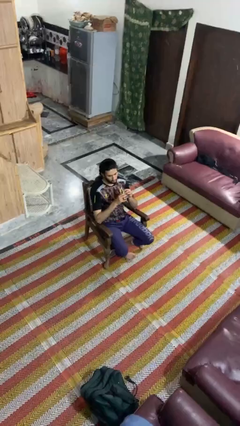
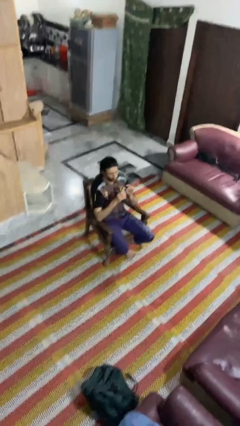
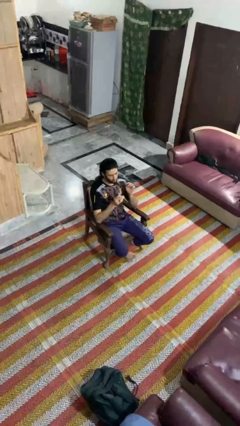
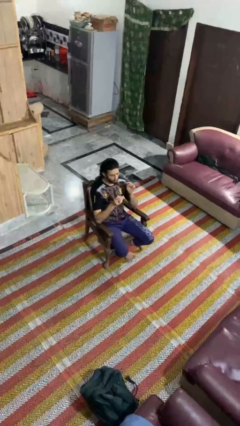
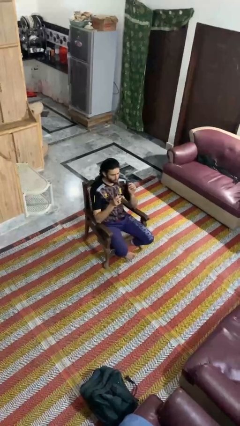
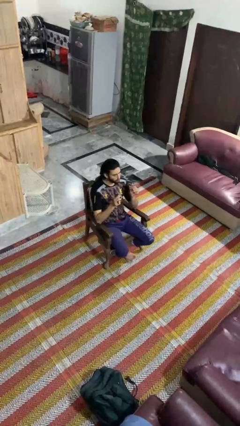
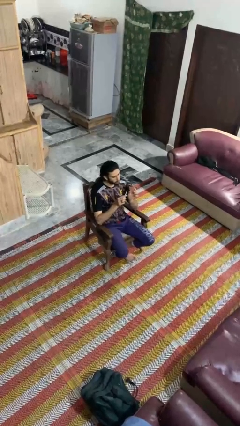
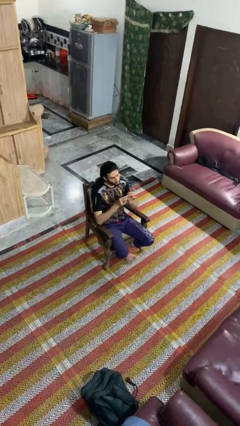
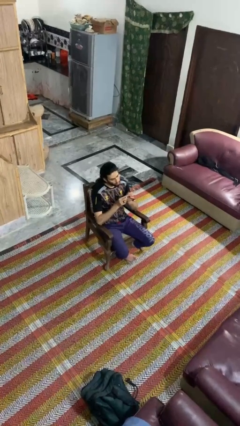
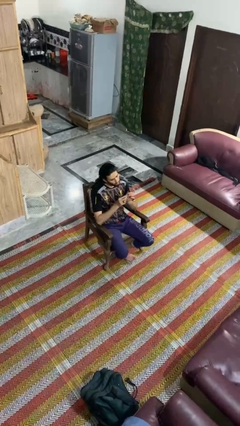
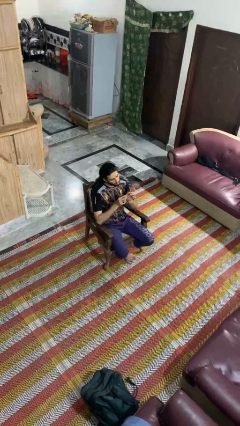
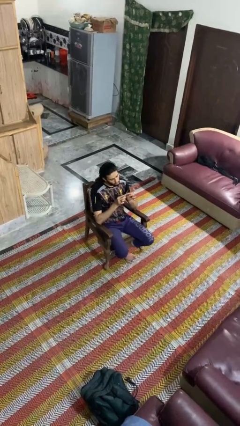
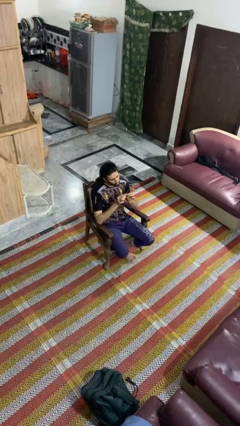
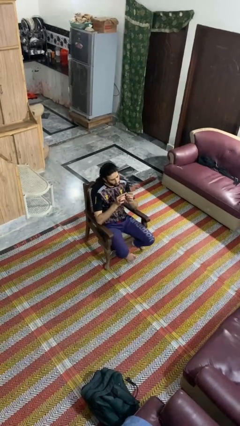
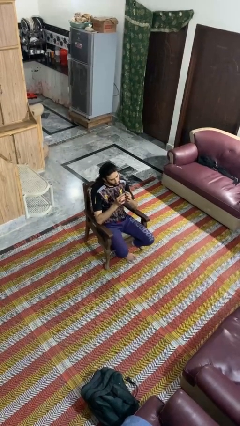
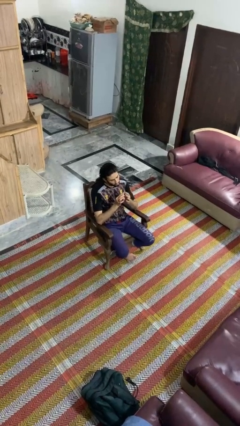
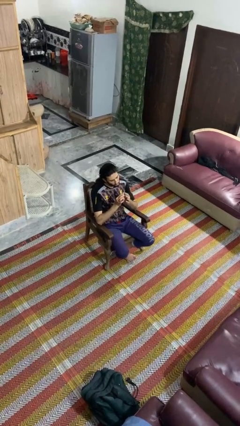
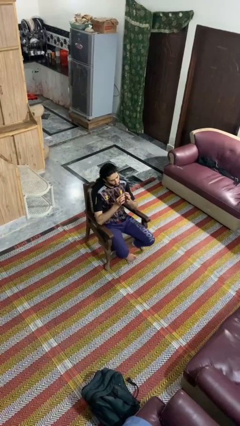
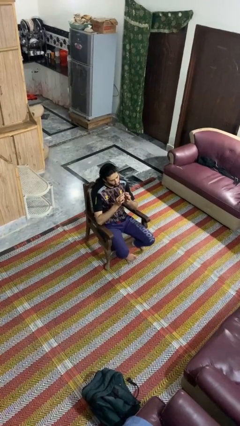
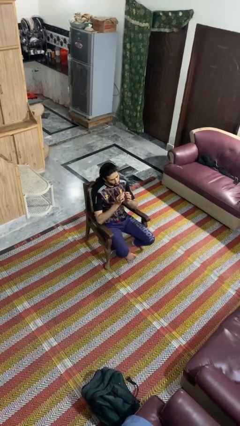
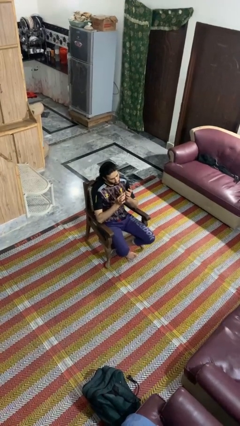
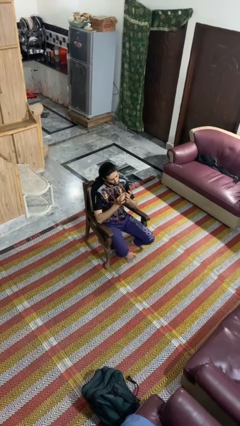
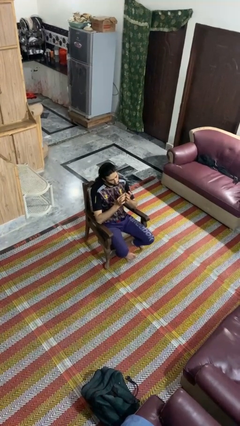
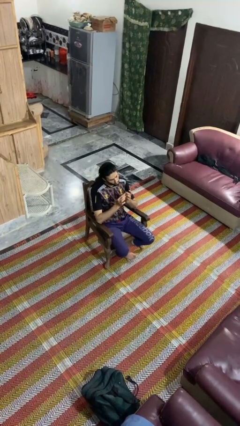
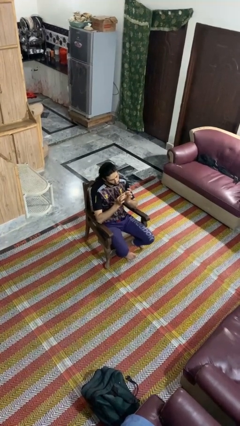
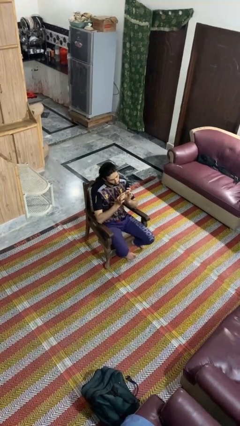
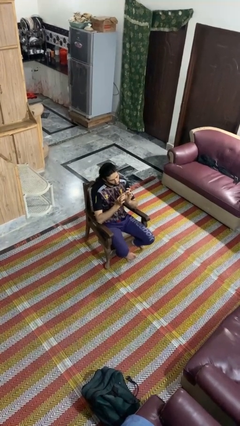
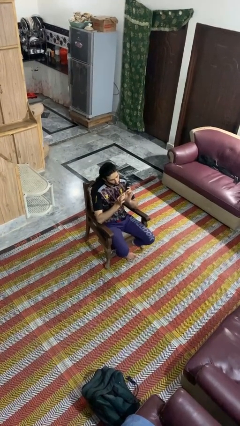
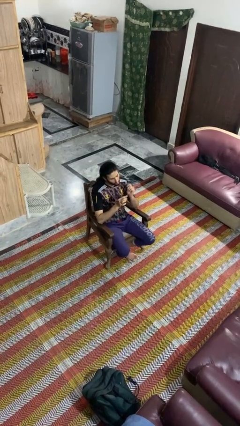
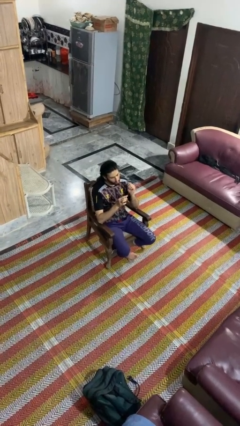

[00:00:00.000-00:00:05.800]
person files fingernails

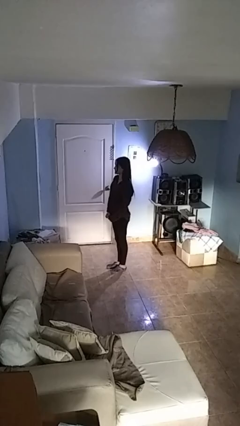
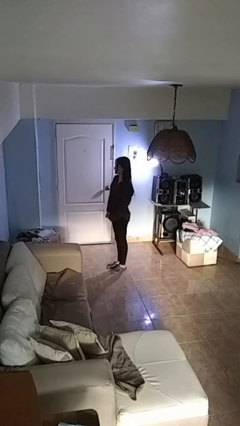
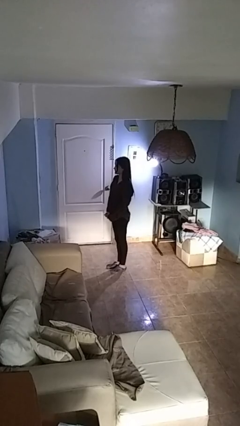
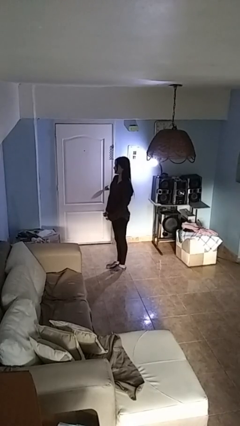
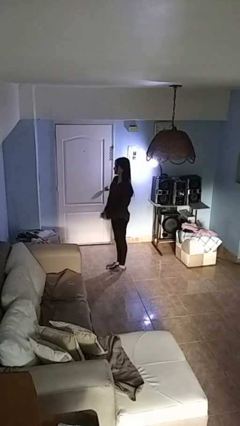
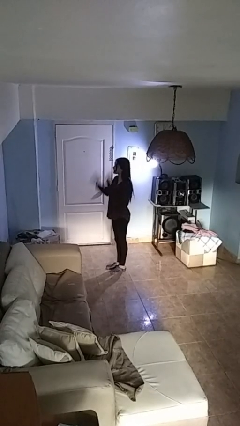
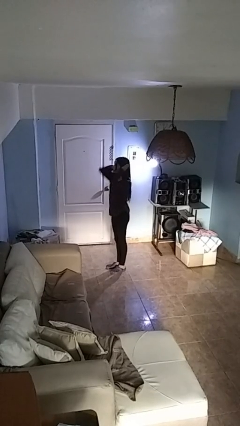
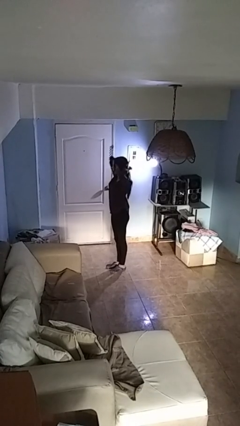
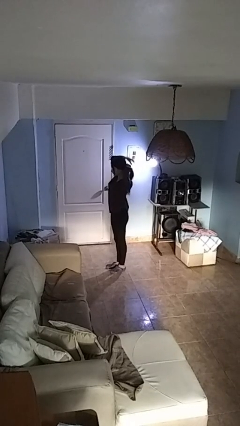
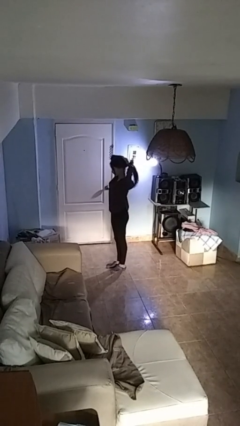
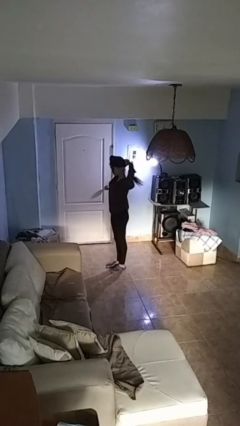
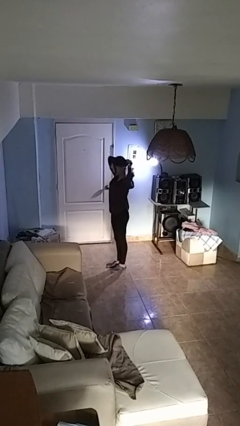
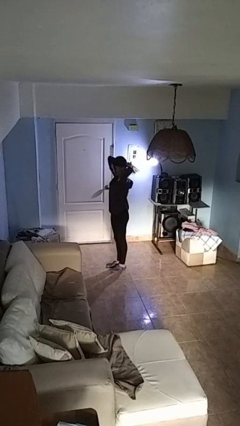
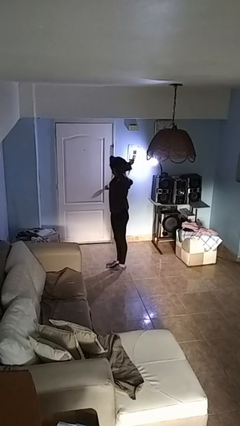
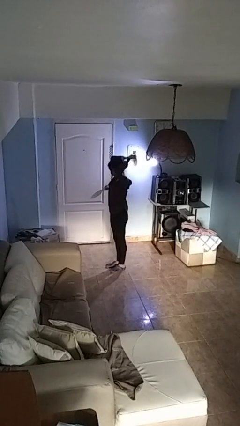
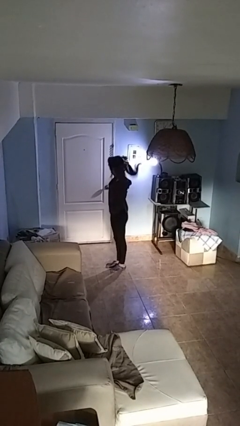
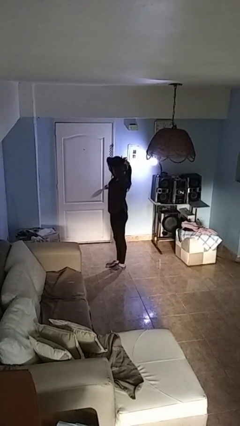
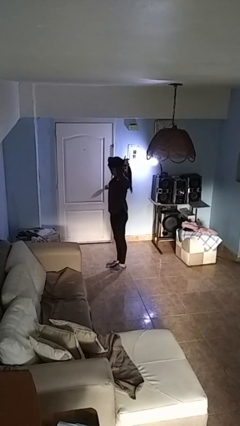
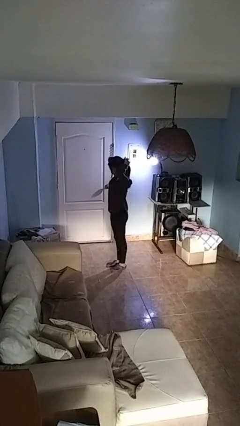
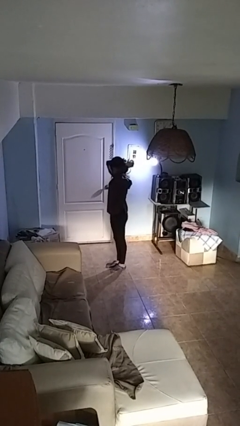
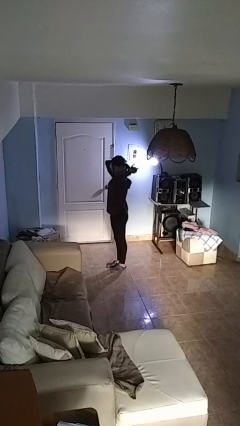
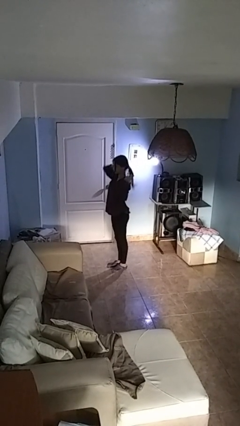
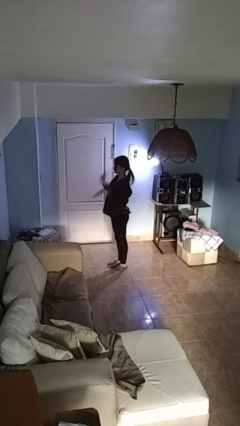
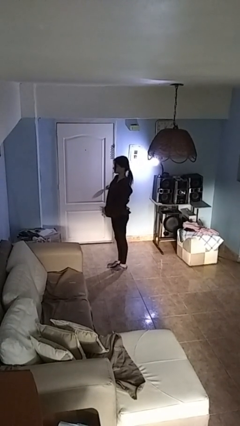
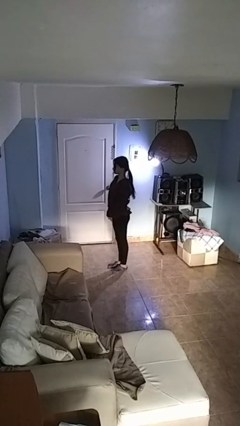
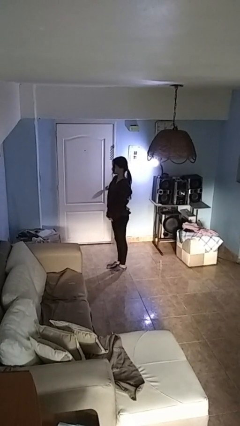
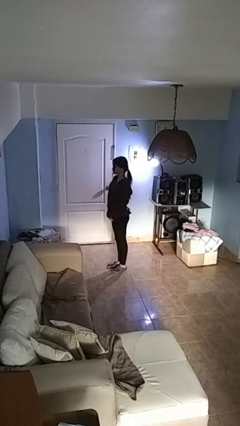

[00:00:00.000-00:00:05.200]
person puts hair in ponytail

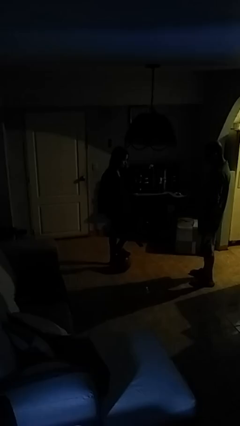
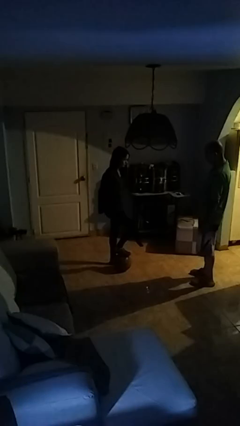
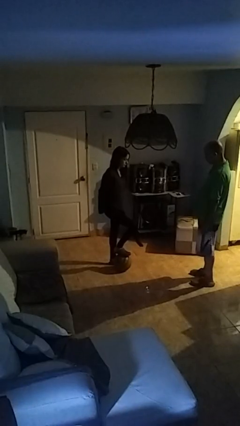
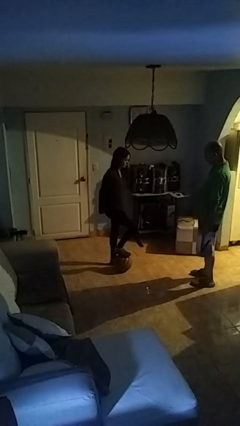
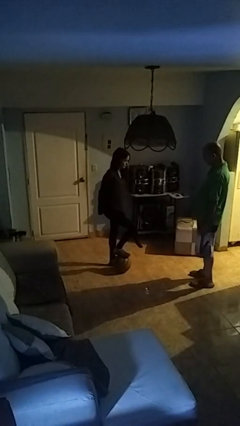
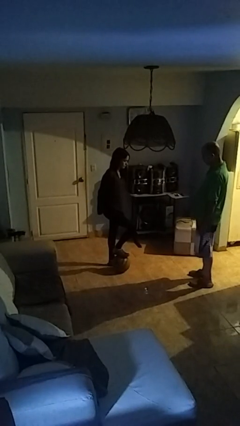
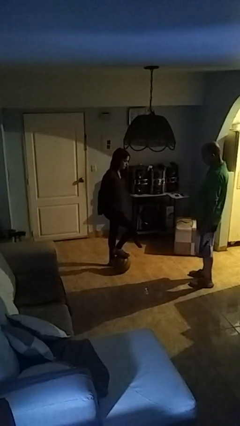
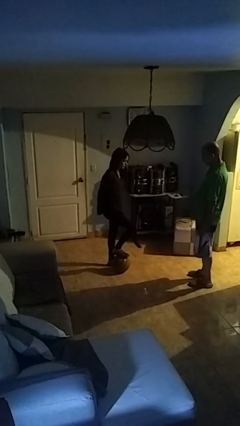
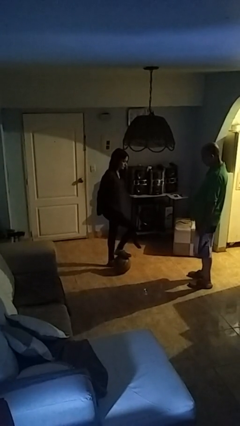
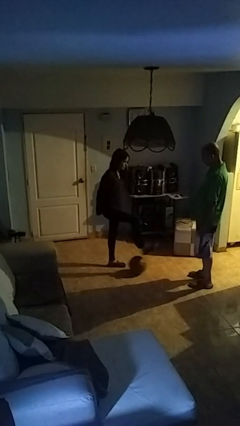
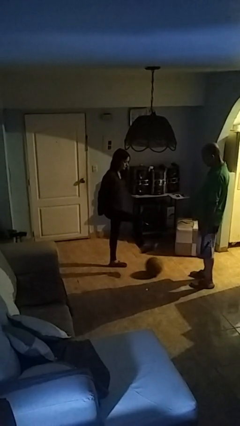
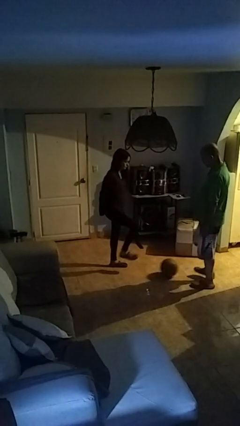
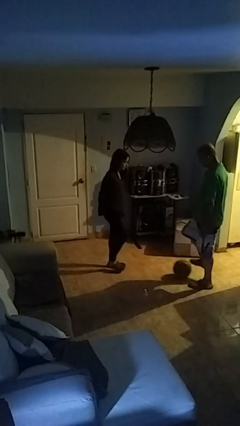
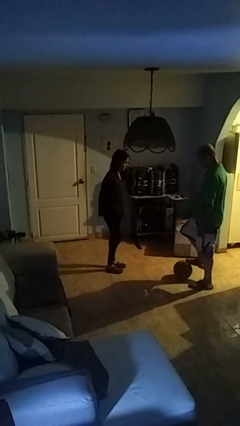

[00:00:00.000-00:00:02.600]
person kicks object to person

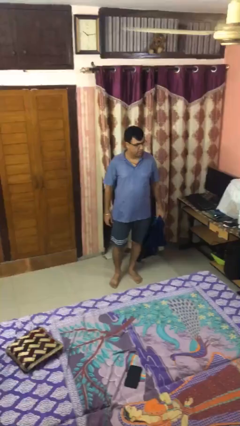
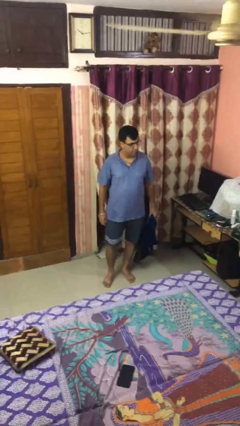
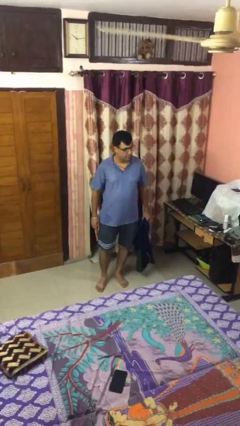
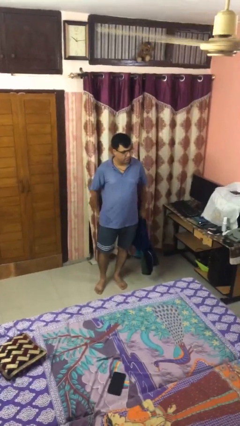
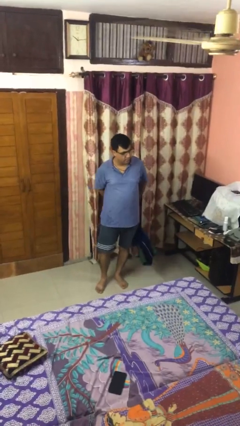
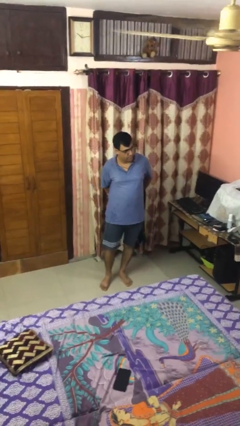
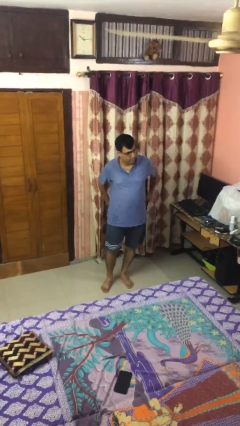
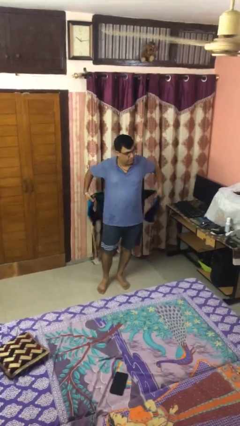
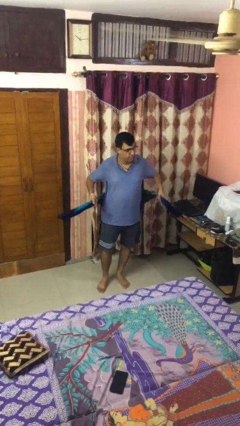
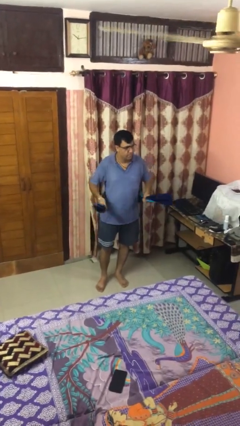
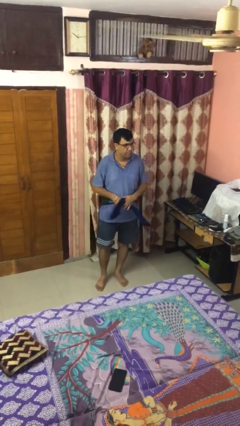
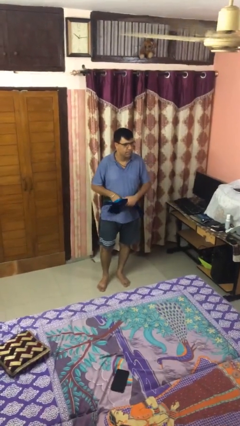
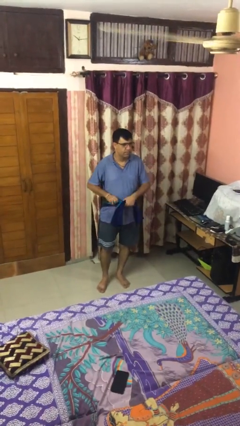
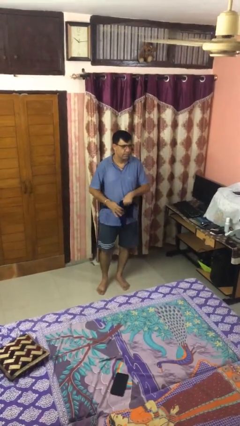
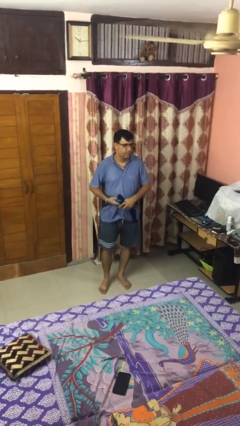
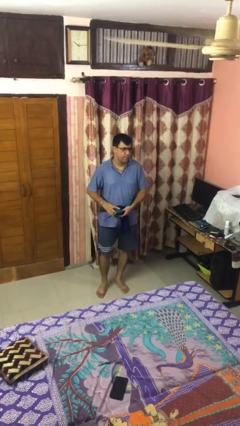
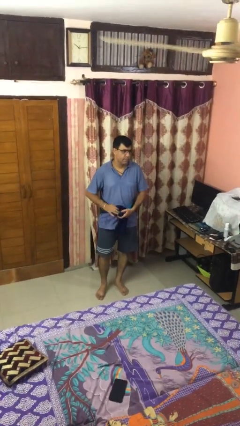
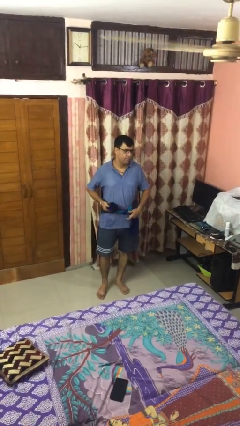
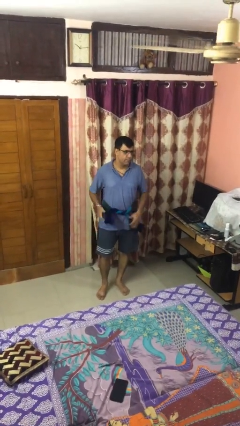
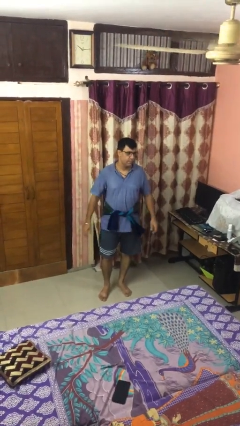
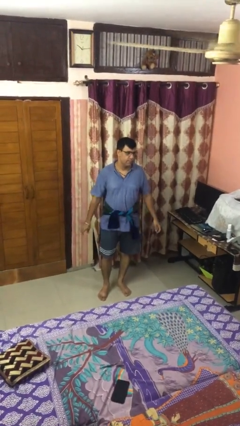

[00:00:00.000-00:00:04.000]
person ties jacket around waist
